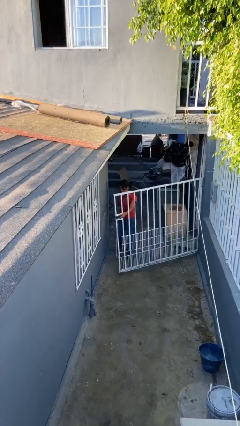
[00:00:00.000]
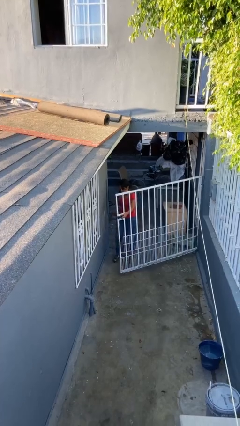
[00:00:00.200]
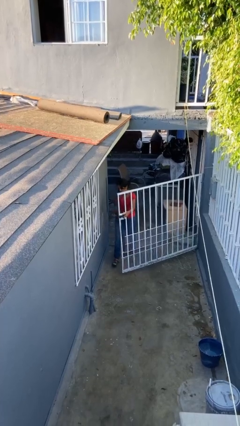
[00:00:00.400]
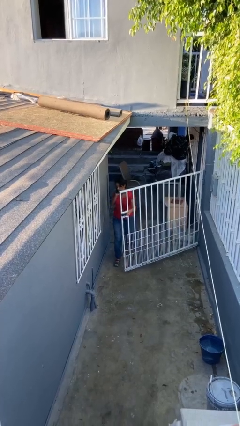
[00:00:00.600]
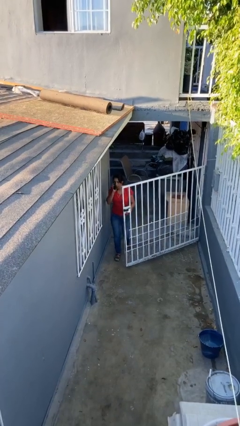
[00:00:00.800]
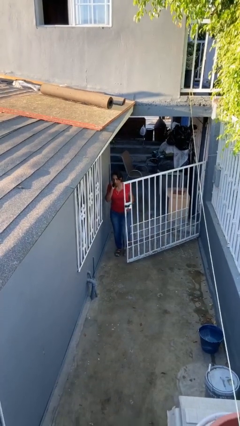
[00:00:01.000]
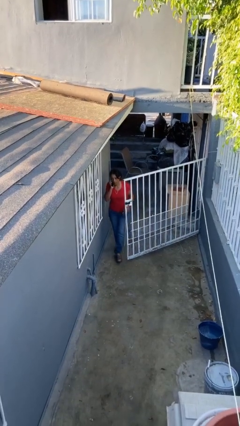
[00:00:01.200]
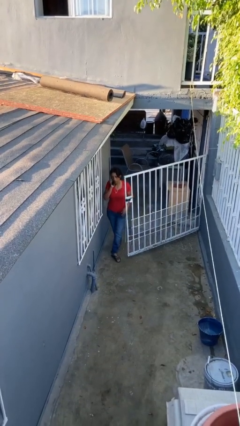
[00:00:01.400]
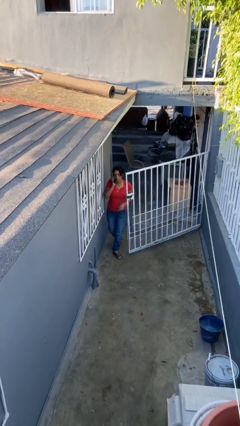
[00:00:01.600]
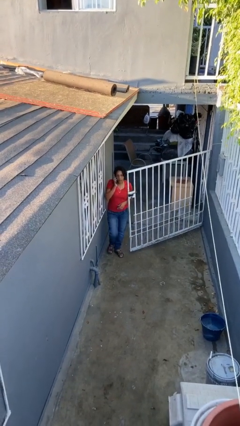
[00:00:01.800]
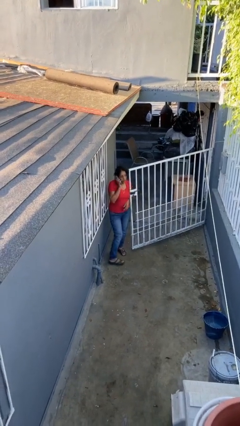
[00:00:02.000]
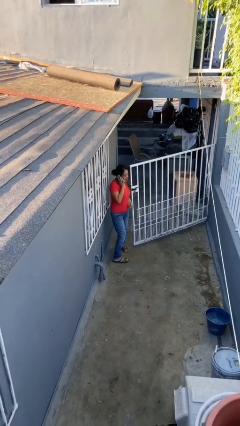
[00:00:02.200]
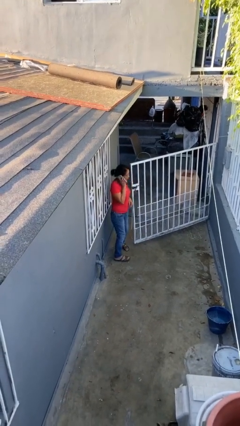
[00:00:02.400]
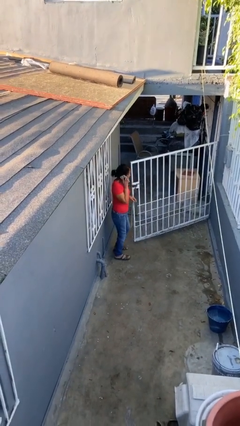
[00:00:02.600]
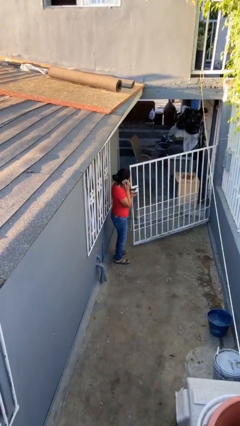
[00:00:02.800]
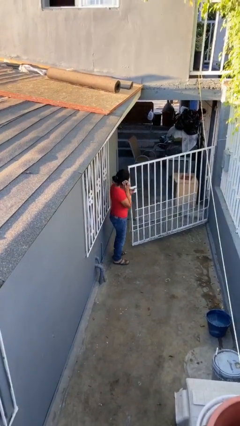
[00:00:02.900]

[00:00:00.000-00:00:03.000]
person enters scene through structure

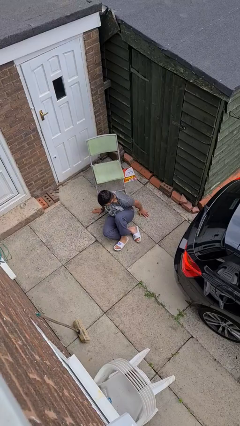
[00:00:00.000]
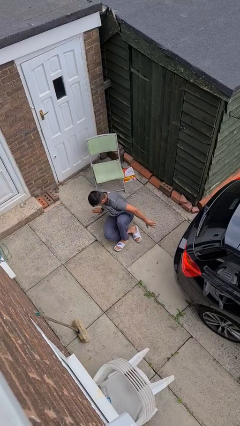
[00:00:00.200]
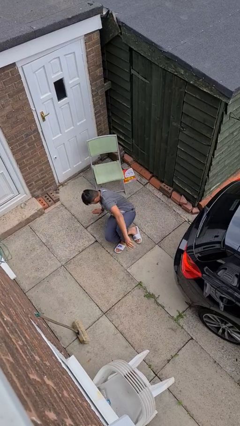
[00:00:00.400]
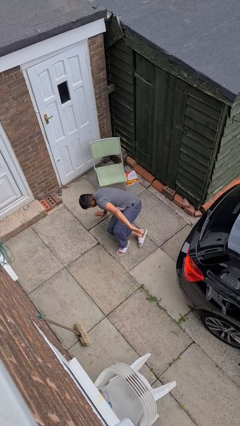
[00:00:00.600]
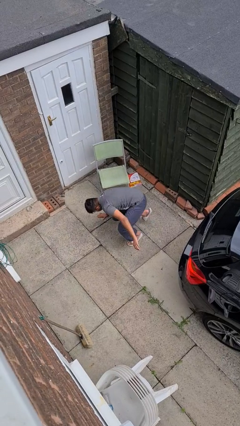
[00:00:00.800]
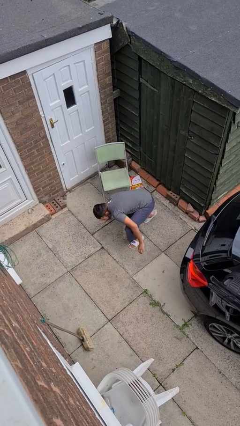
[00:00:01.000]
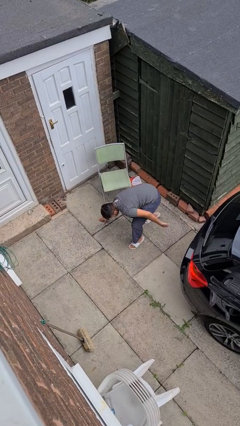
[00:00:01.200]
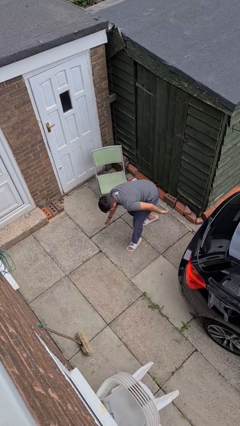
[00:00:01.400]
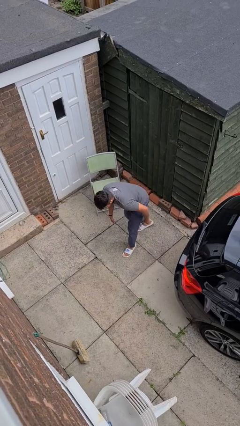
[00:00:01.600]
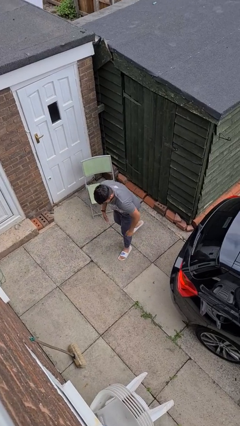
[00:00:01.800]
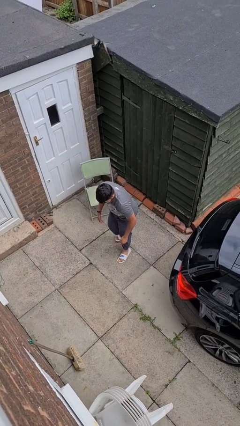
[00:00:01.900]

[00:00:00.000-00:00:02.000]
person stands up from floor

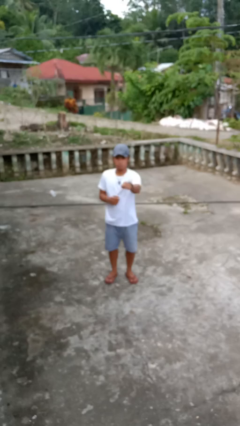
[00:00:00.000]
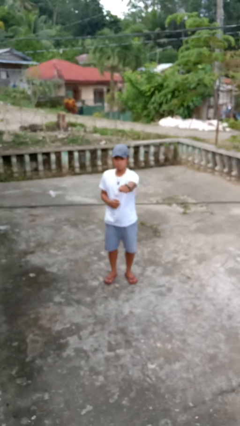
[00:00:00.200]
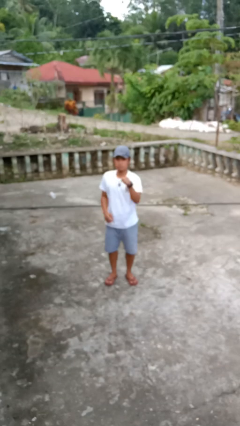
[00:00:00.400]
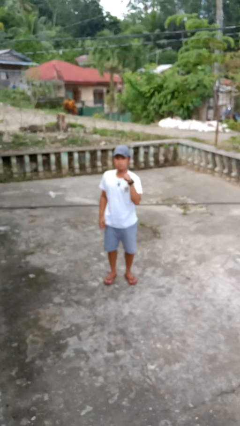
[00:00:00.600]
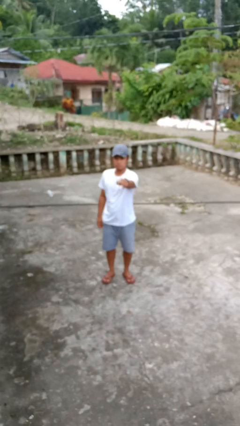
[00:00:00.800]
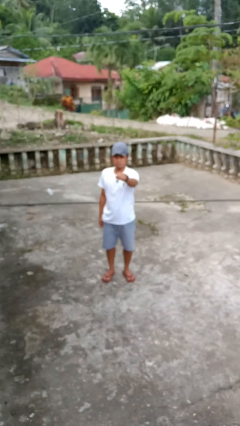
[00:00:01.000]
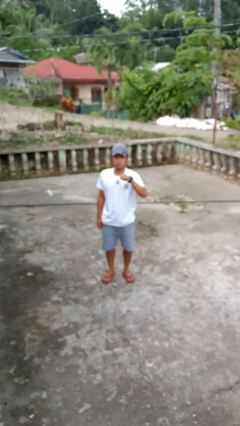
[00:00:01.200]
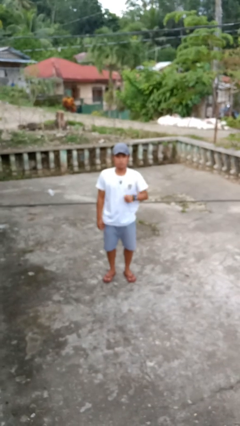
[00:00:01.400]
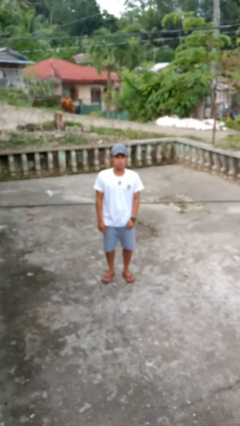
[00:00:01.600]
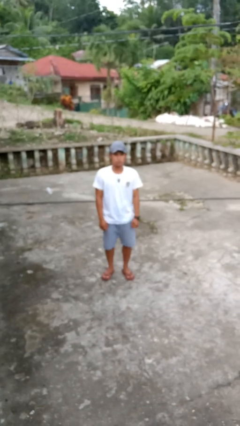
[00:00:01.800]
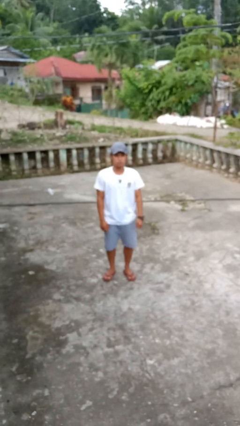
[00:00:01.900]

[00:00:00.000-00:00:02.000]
person punches

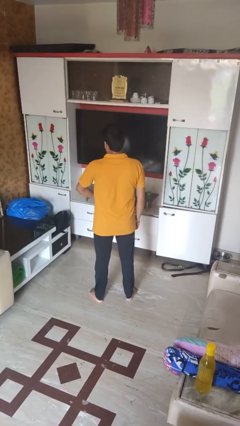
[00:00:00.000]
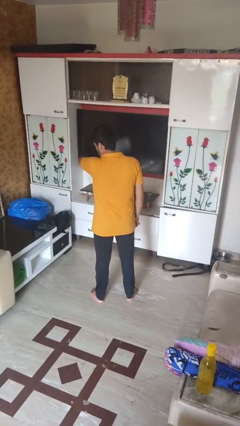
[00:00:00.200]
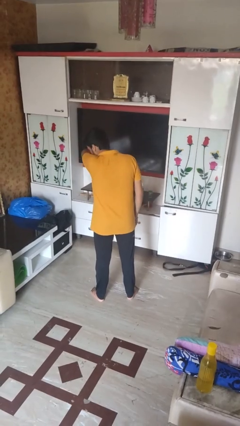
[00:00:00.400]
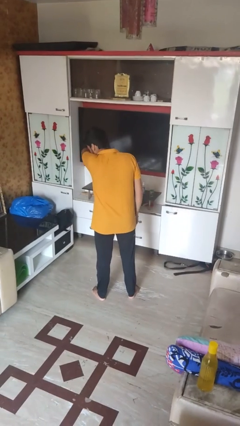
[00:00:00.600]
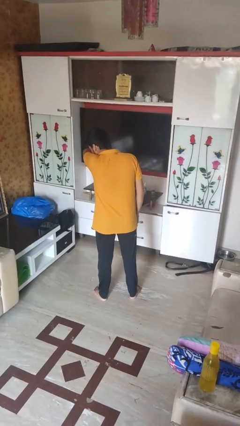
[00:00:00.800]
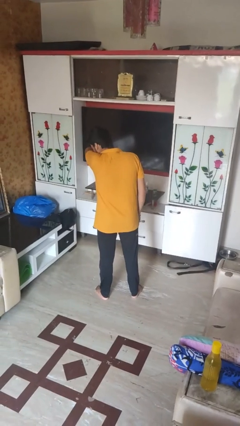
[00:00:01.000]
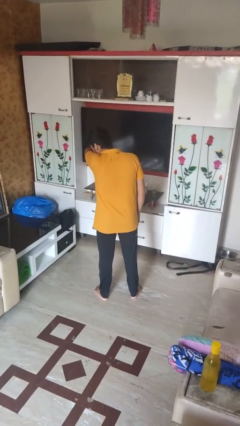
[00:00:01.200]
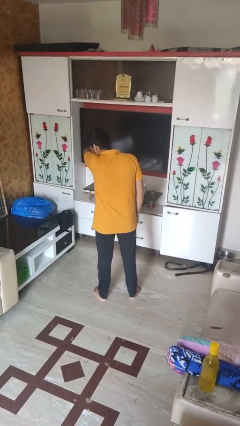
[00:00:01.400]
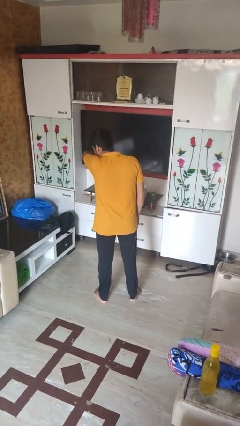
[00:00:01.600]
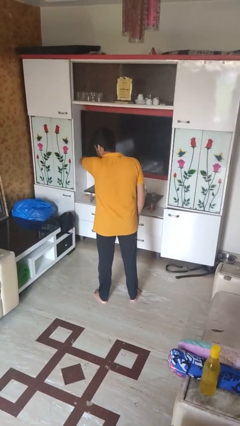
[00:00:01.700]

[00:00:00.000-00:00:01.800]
person sneezes into arm

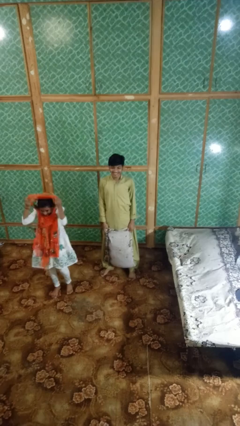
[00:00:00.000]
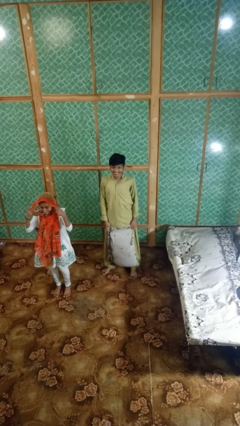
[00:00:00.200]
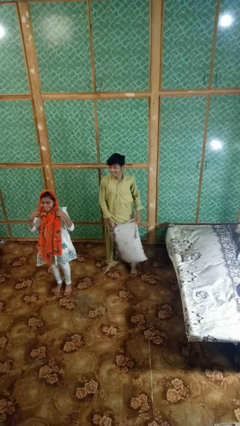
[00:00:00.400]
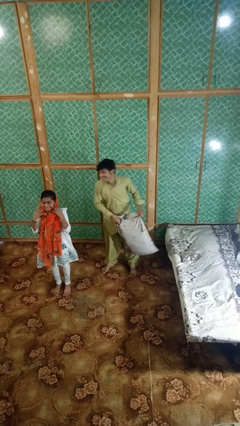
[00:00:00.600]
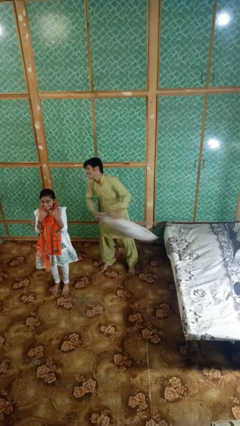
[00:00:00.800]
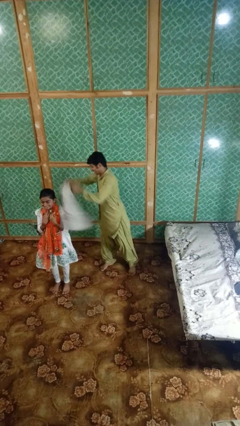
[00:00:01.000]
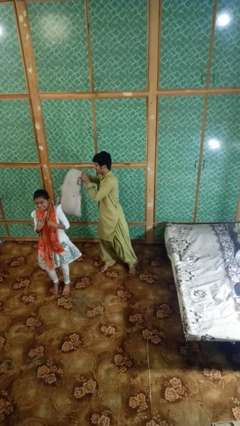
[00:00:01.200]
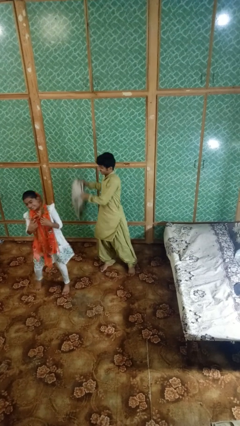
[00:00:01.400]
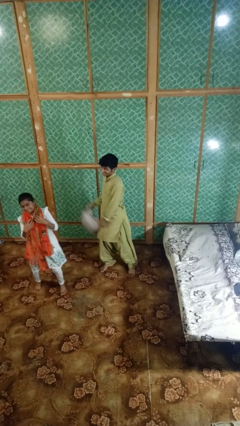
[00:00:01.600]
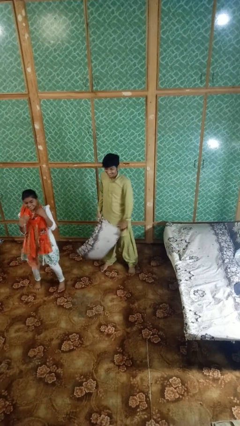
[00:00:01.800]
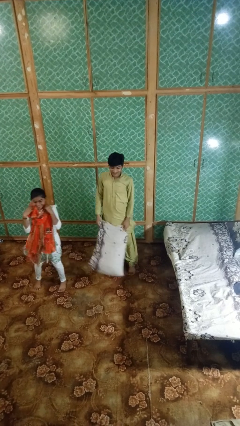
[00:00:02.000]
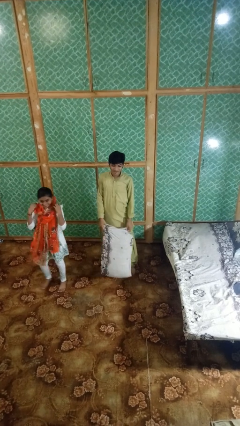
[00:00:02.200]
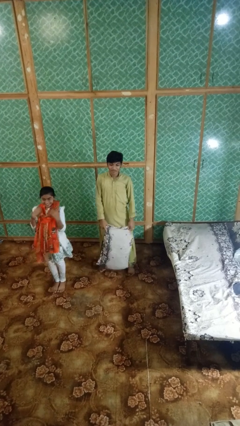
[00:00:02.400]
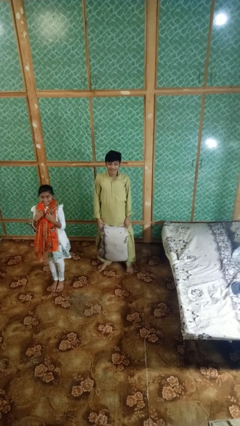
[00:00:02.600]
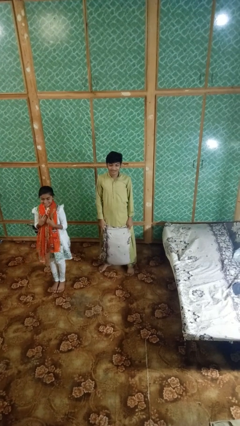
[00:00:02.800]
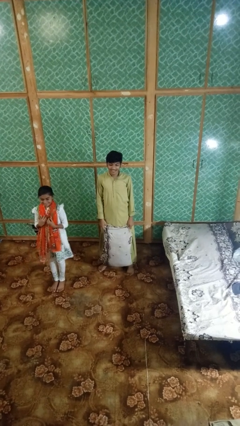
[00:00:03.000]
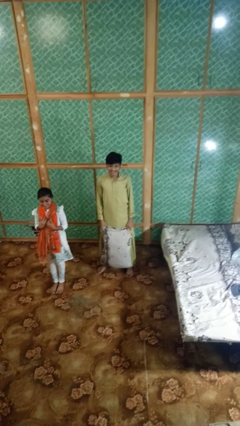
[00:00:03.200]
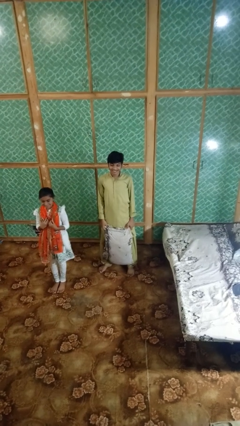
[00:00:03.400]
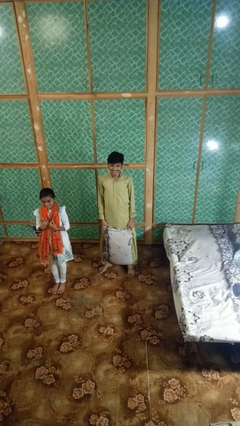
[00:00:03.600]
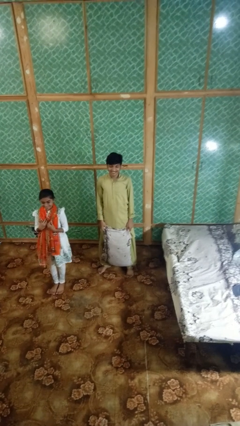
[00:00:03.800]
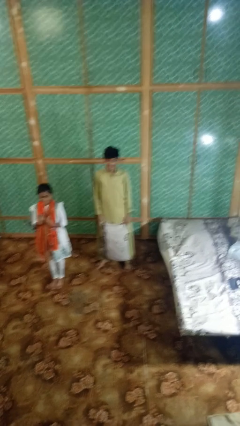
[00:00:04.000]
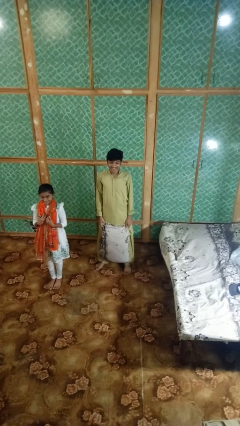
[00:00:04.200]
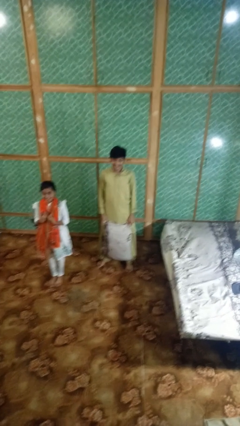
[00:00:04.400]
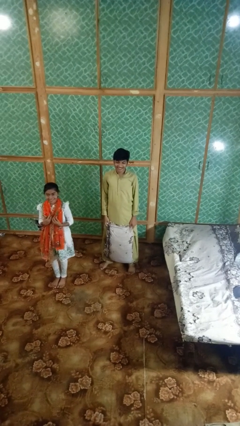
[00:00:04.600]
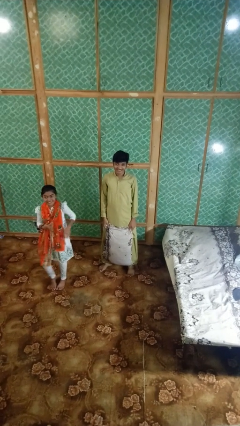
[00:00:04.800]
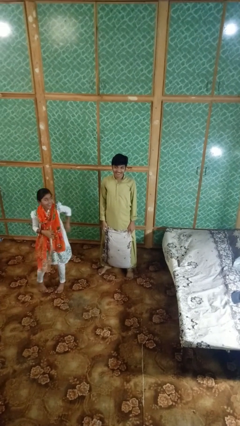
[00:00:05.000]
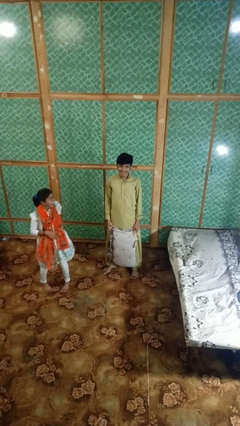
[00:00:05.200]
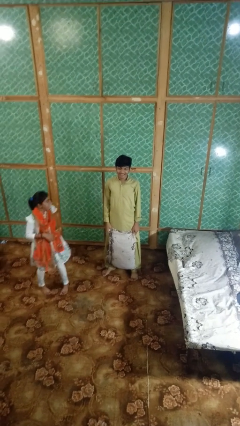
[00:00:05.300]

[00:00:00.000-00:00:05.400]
person hits person with pillow

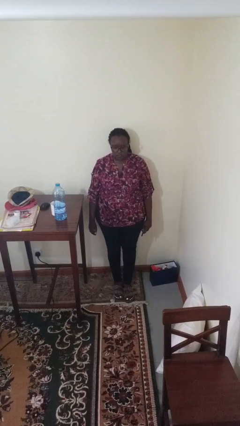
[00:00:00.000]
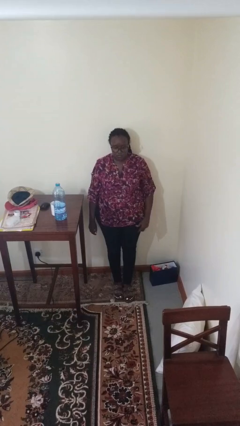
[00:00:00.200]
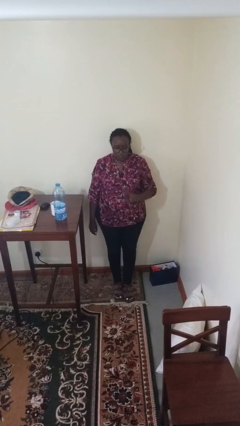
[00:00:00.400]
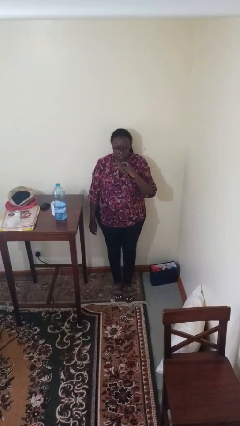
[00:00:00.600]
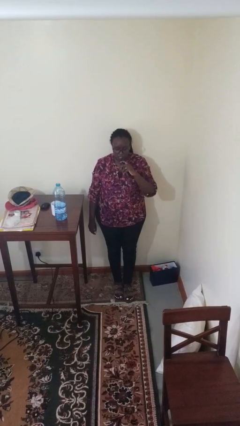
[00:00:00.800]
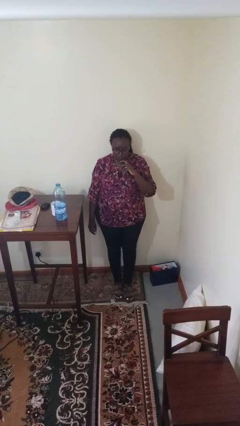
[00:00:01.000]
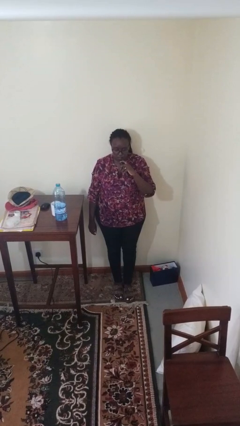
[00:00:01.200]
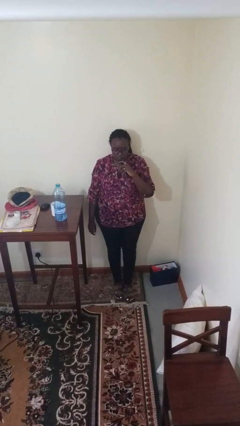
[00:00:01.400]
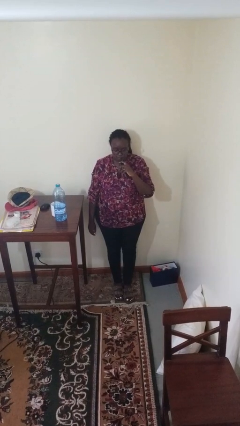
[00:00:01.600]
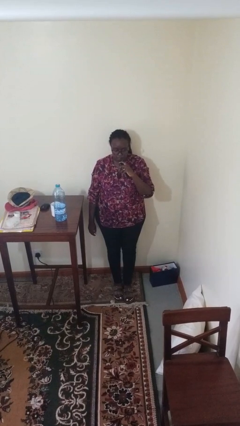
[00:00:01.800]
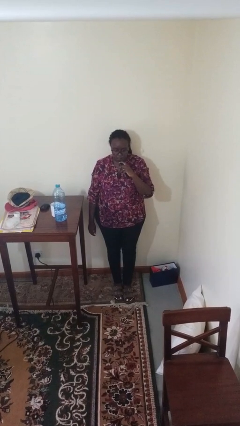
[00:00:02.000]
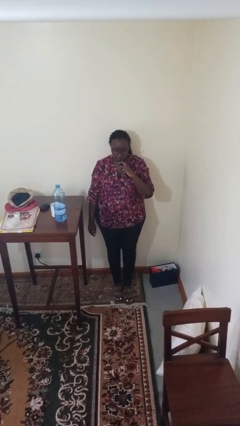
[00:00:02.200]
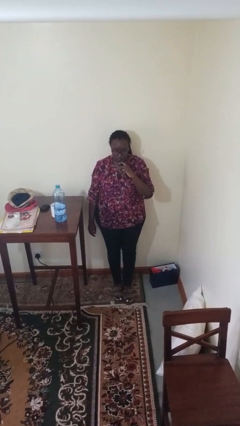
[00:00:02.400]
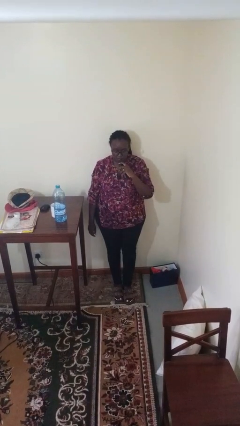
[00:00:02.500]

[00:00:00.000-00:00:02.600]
person vapes

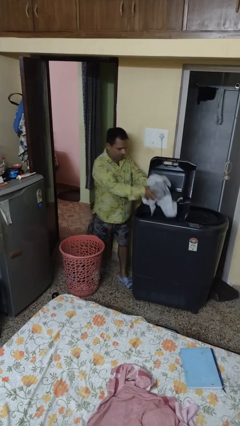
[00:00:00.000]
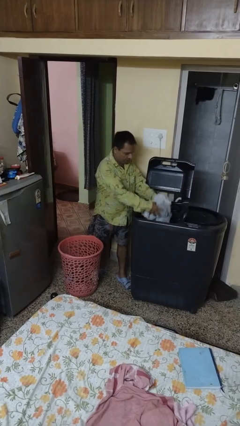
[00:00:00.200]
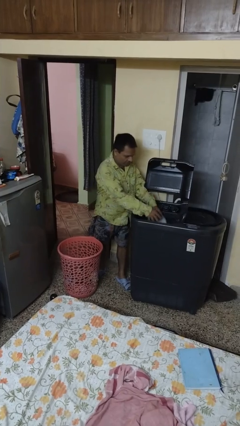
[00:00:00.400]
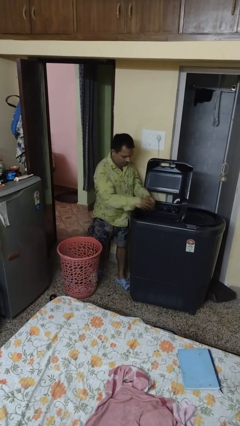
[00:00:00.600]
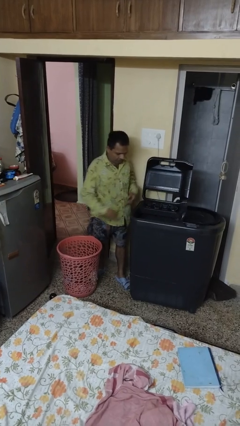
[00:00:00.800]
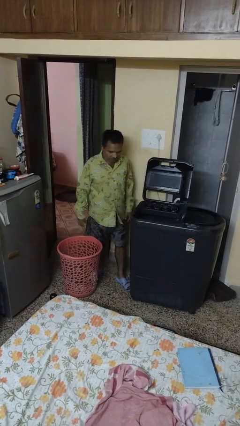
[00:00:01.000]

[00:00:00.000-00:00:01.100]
person loads clotheswasher
